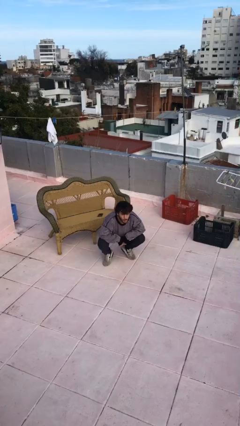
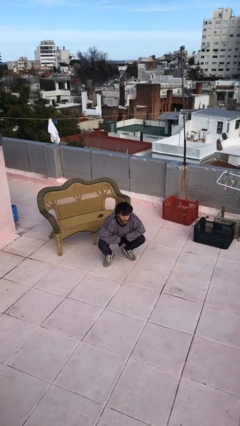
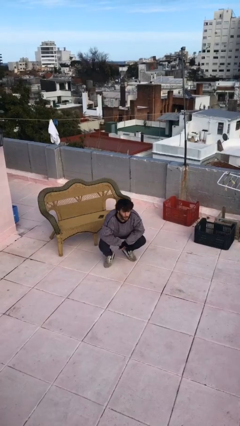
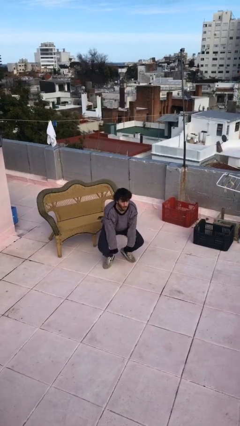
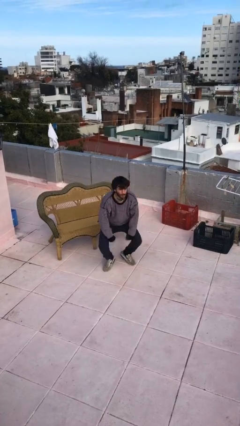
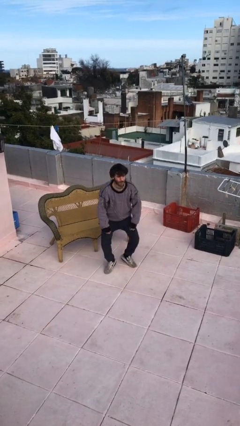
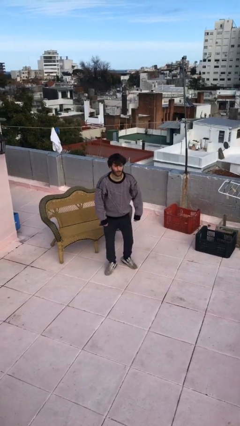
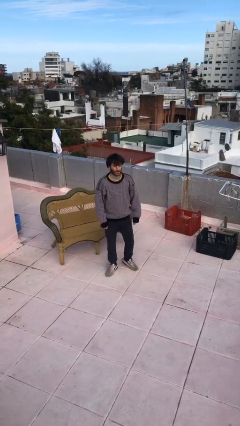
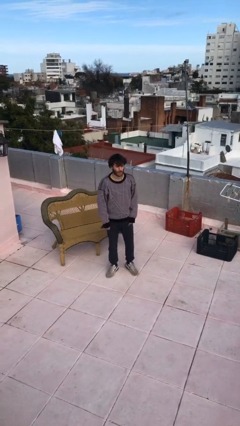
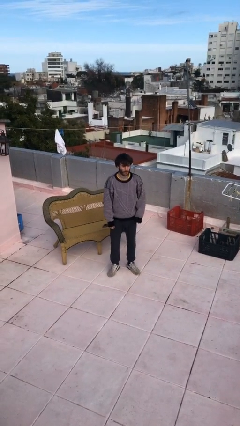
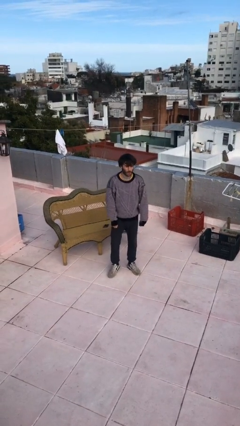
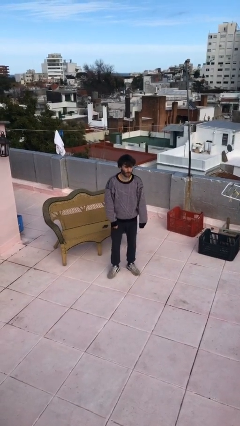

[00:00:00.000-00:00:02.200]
person stands up

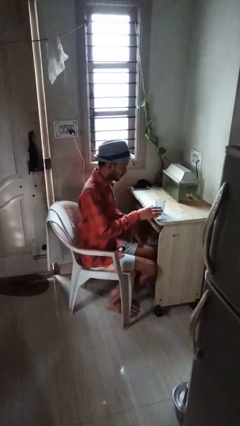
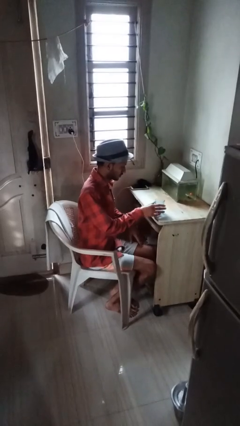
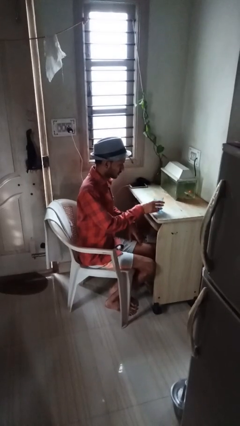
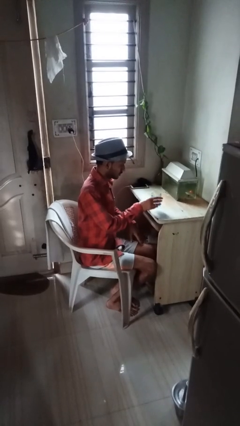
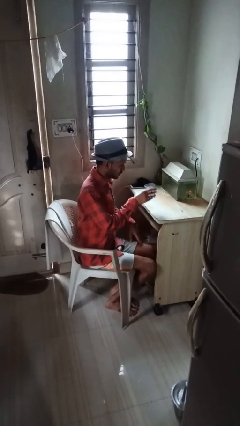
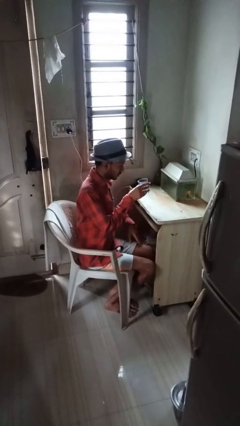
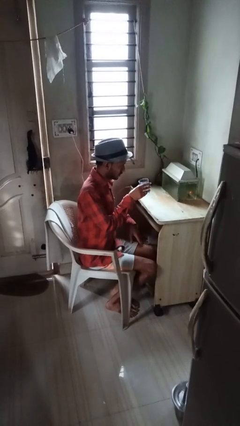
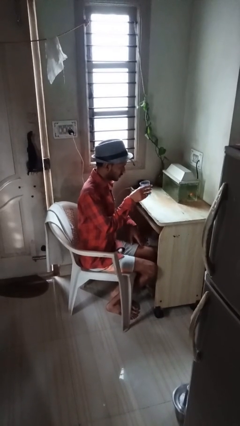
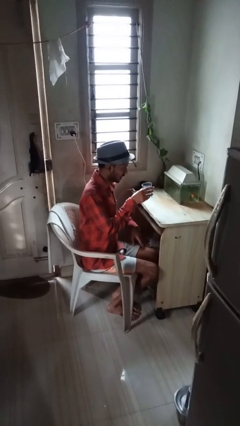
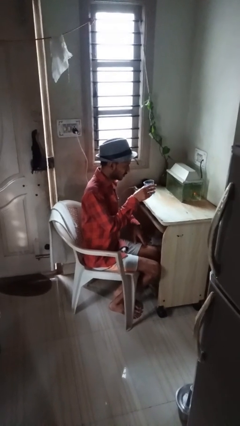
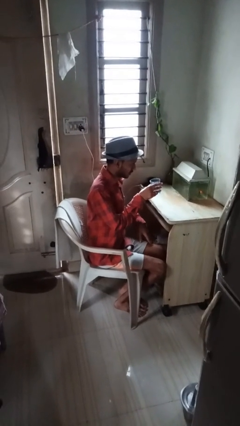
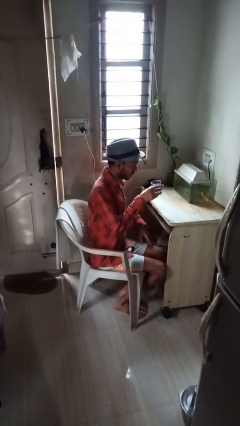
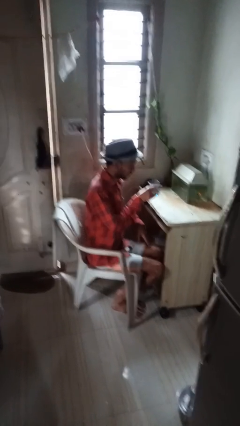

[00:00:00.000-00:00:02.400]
person picks up object from table

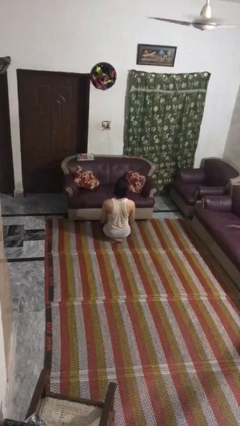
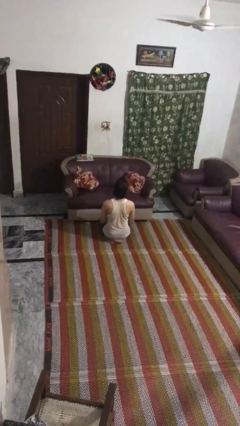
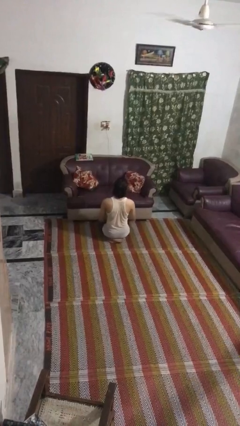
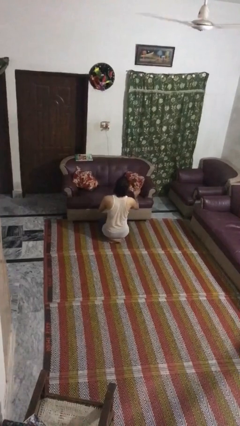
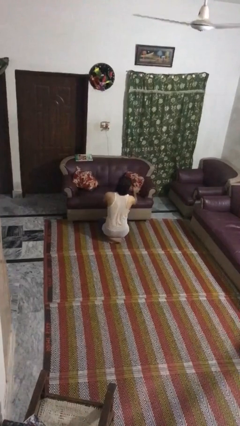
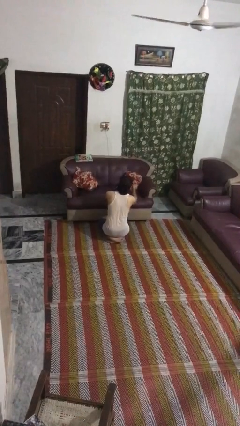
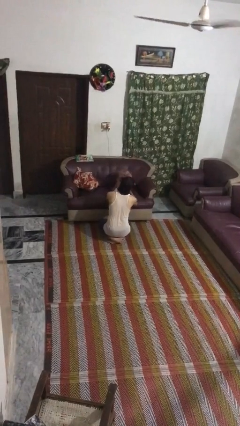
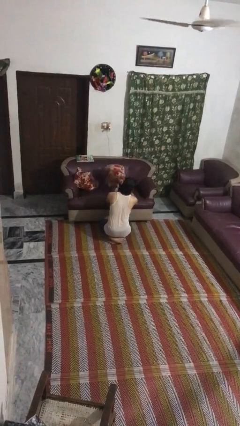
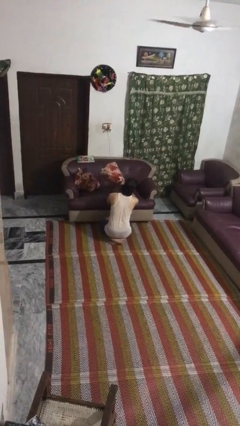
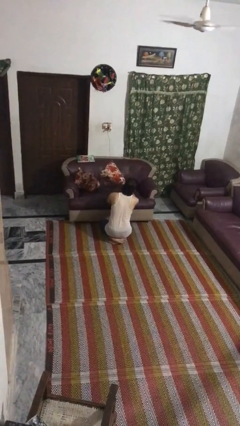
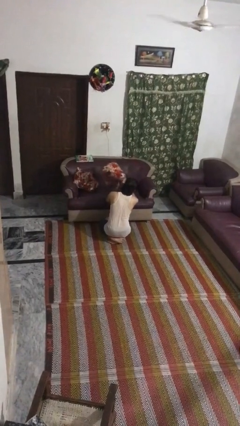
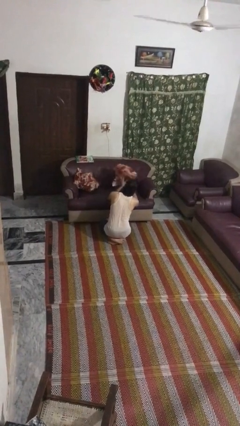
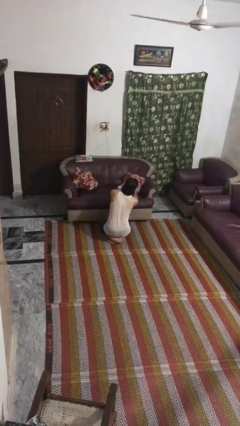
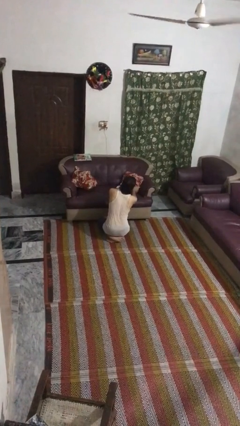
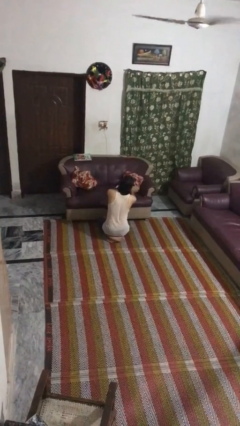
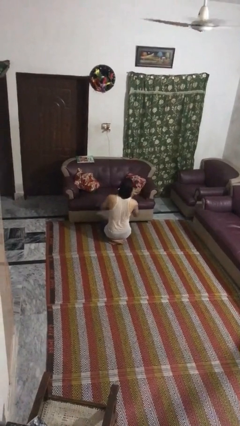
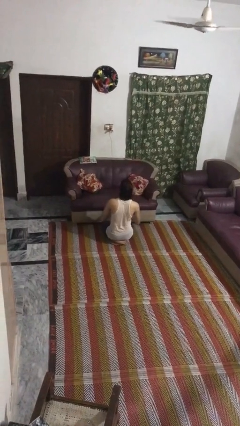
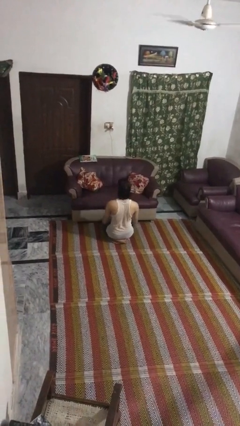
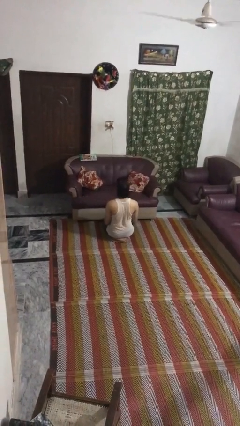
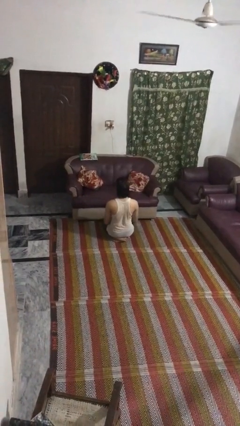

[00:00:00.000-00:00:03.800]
person searches in couch

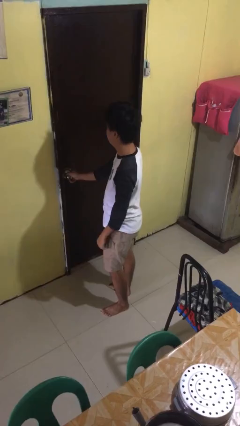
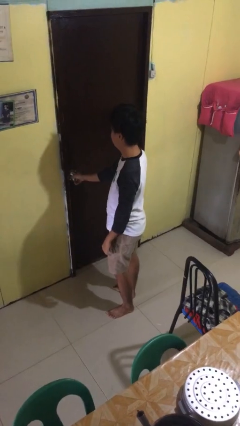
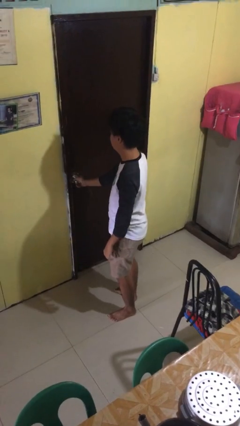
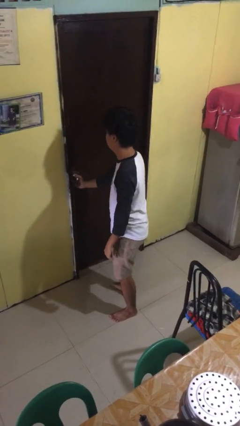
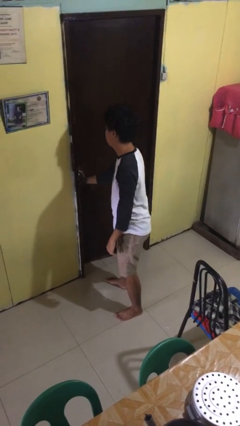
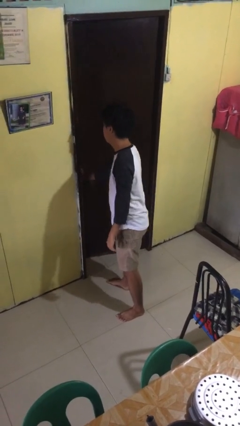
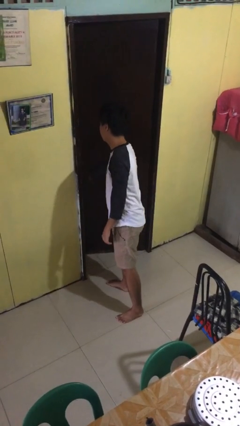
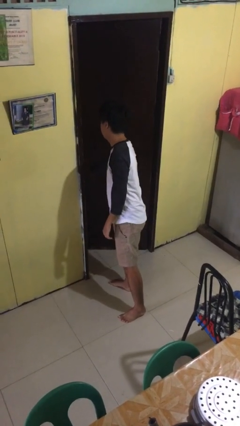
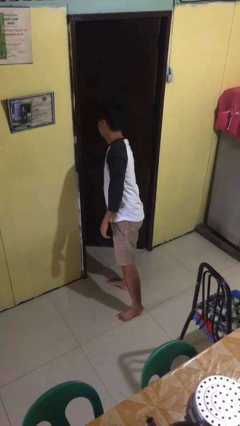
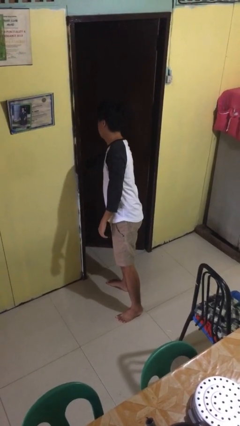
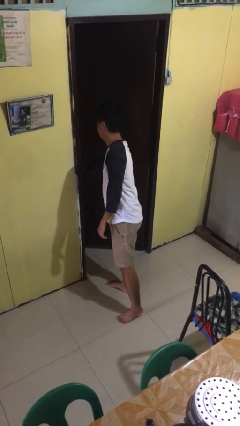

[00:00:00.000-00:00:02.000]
person opens facility door

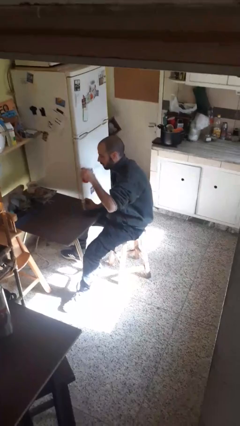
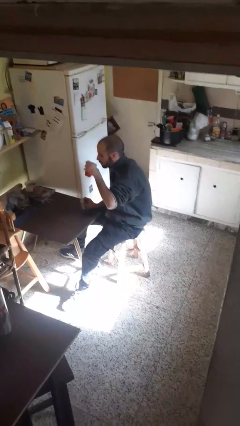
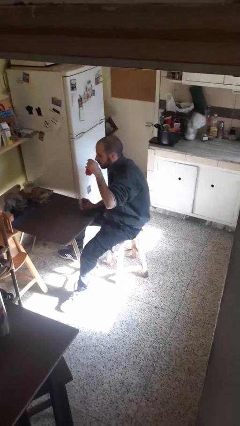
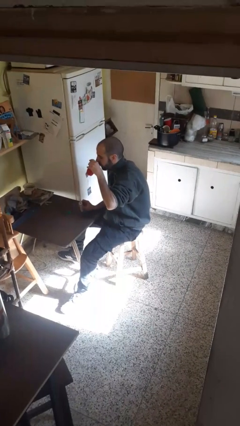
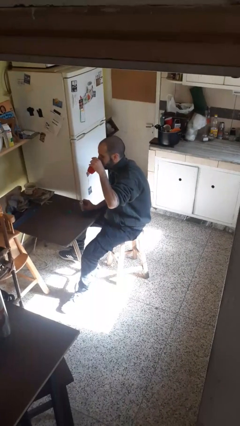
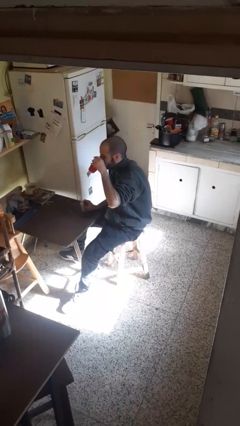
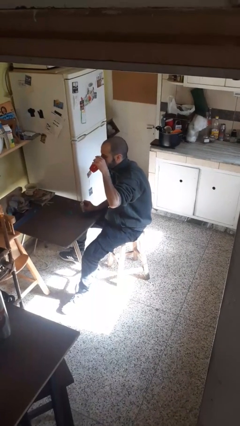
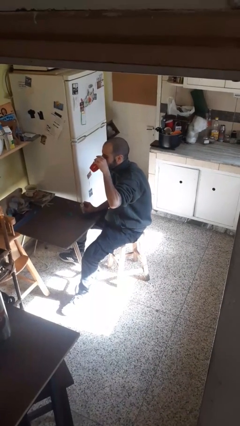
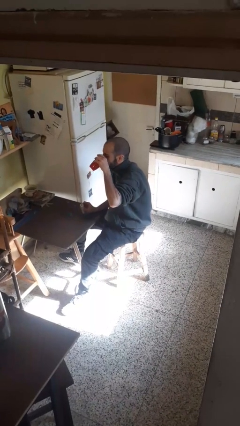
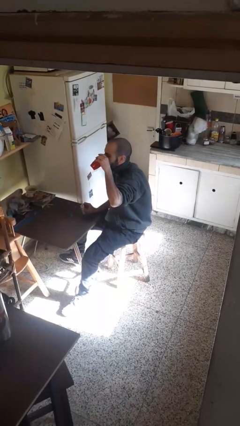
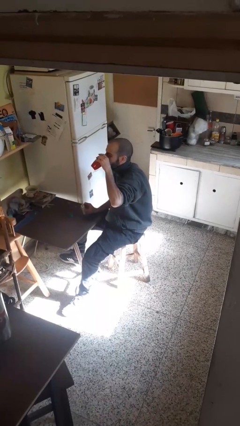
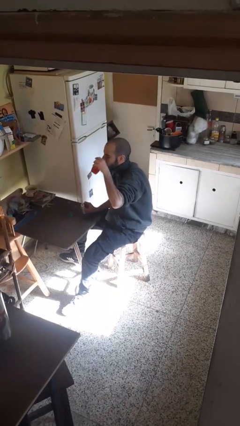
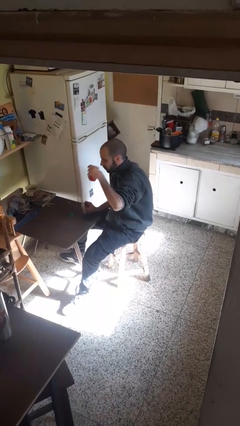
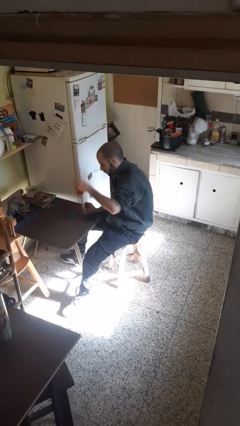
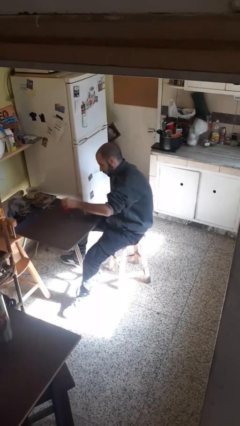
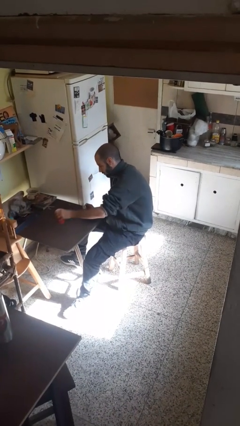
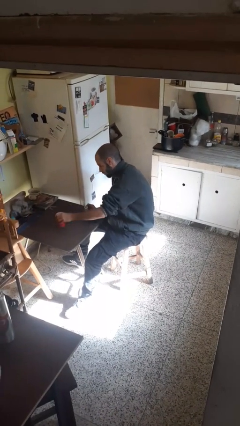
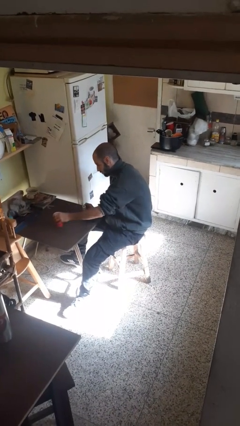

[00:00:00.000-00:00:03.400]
person drinks from cup

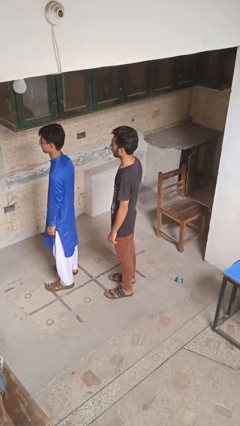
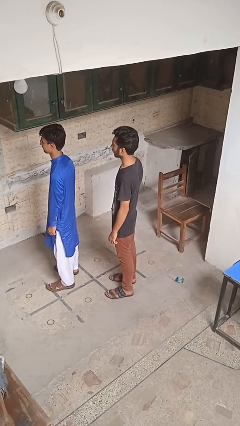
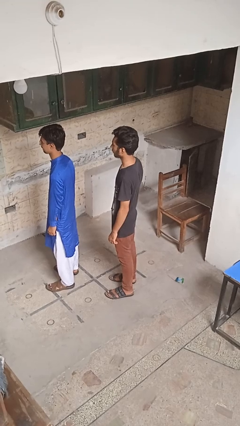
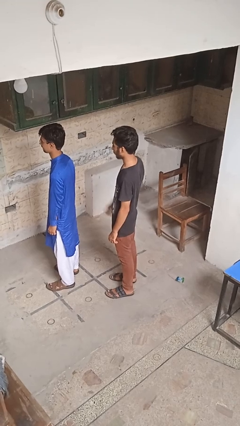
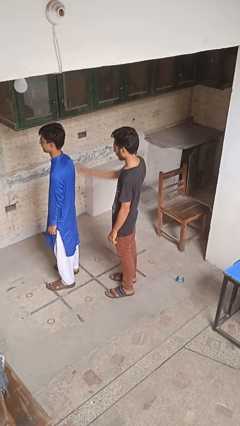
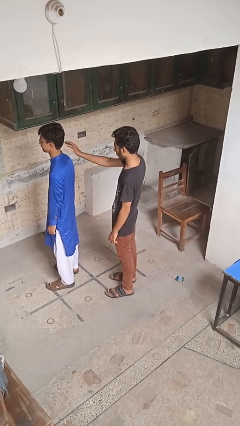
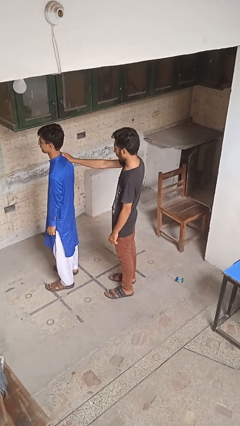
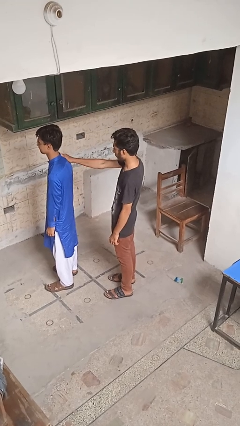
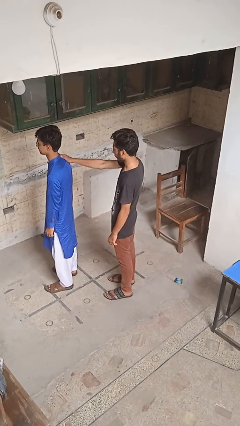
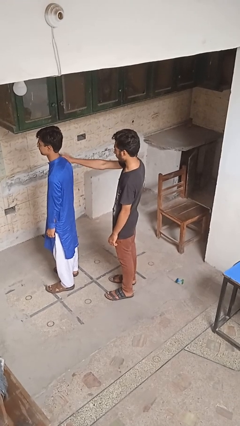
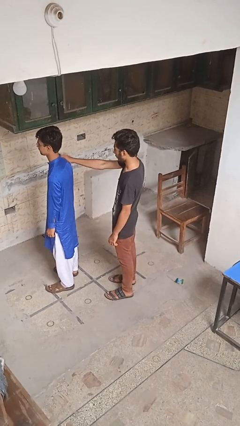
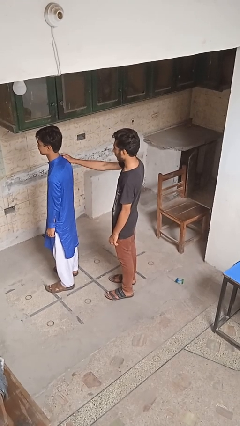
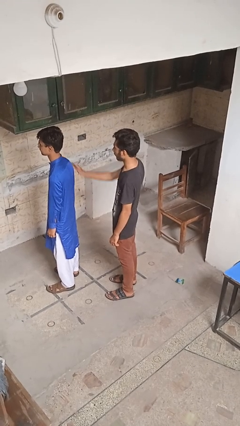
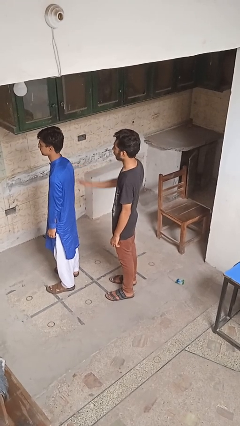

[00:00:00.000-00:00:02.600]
person touches back of person

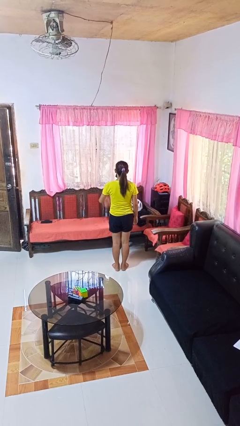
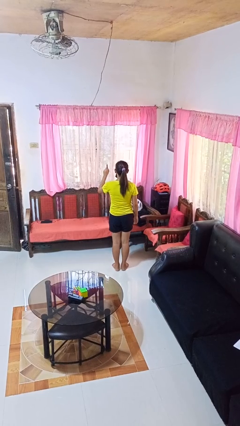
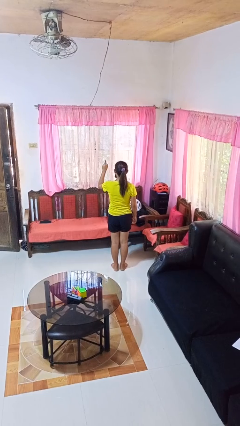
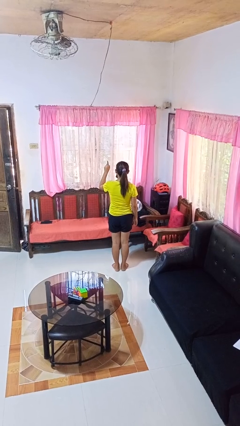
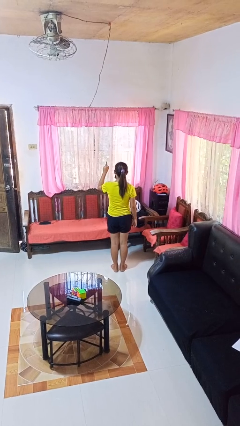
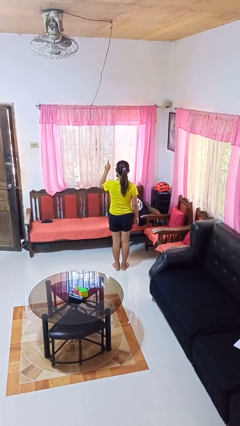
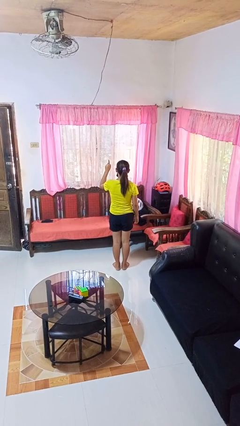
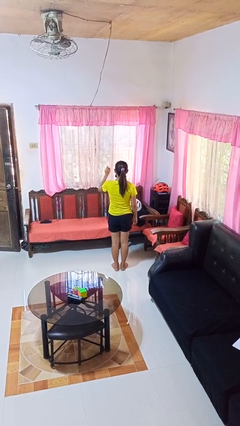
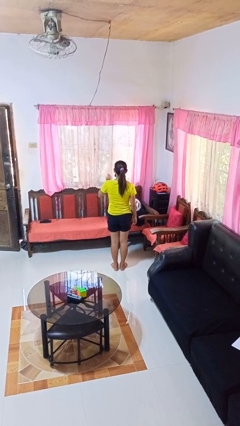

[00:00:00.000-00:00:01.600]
person gestures number one
